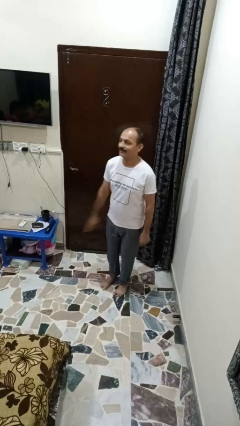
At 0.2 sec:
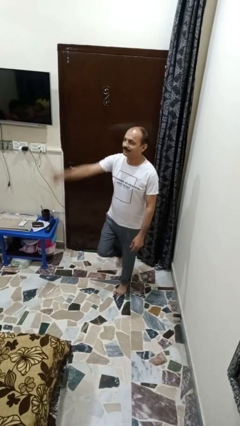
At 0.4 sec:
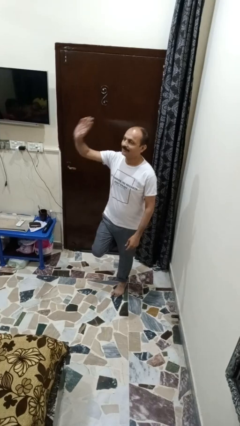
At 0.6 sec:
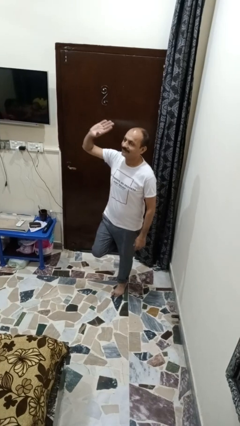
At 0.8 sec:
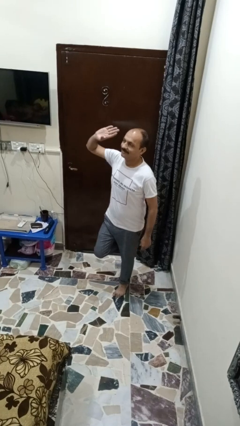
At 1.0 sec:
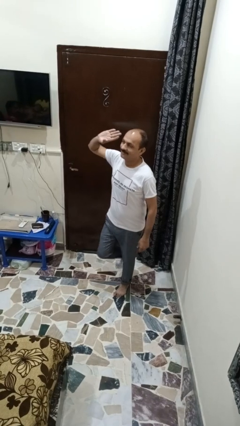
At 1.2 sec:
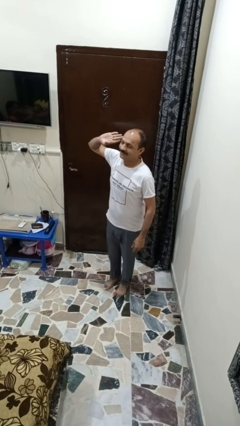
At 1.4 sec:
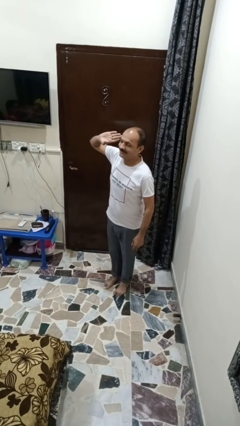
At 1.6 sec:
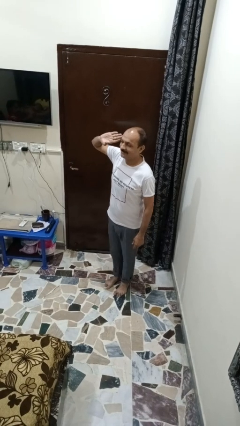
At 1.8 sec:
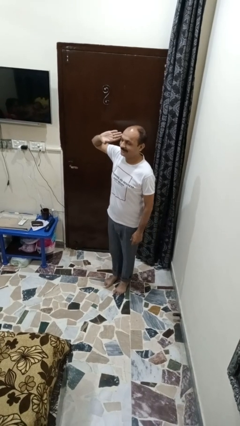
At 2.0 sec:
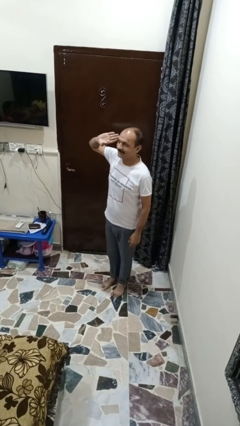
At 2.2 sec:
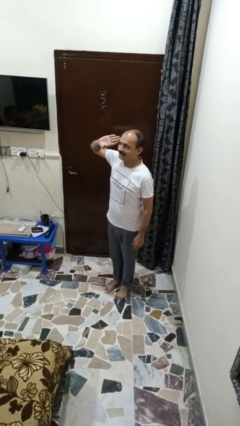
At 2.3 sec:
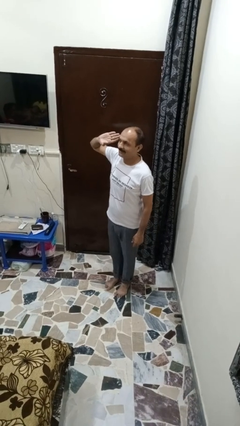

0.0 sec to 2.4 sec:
person salutes

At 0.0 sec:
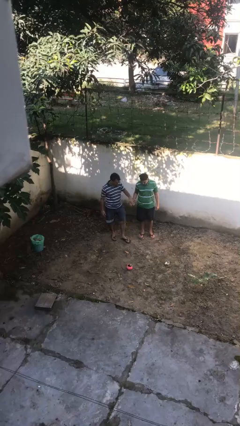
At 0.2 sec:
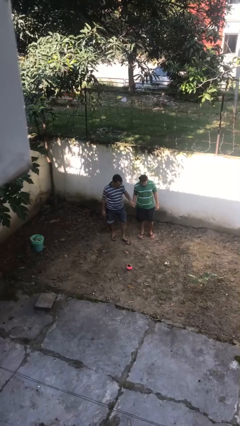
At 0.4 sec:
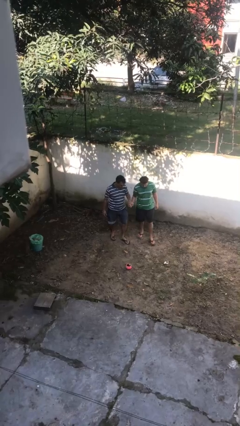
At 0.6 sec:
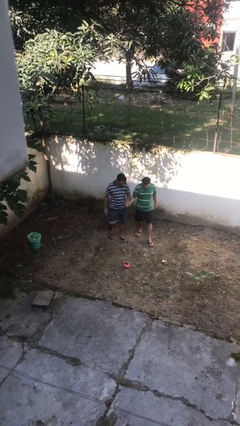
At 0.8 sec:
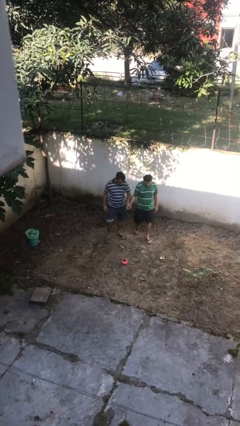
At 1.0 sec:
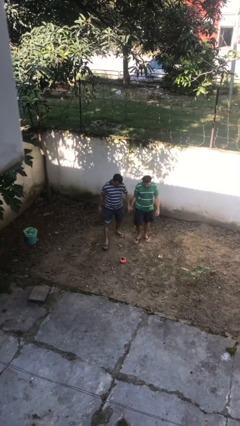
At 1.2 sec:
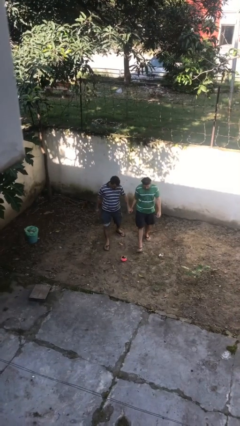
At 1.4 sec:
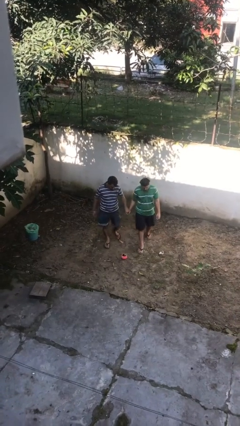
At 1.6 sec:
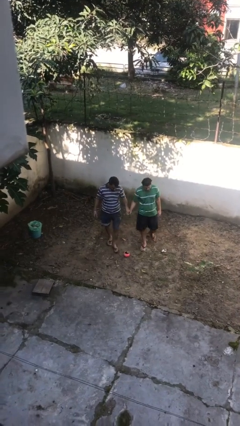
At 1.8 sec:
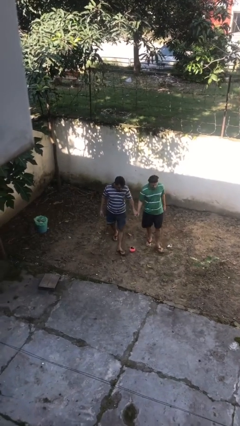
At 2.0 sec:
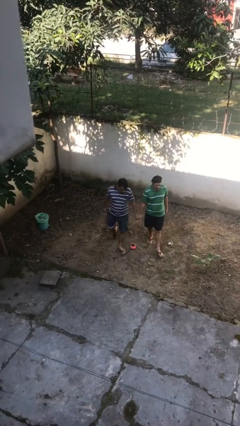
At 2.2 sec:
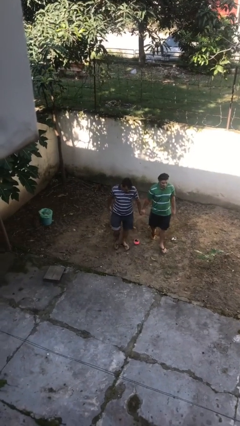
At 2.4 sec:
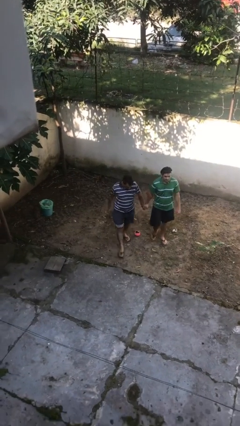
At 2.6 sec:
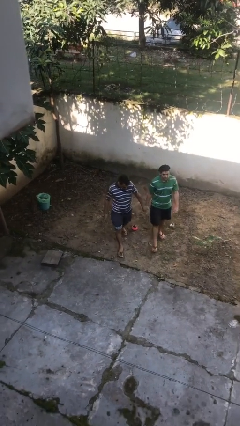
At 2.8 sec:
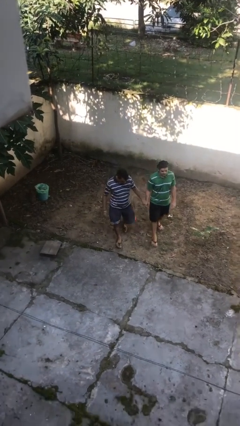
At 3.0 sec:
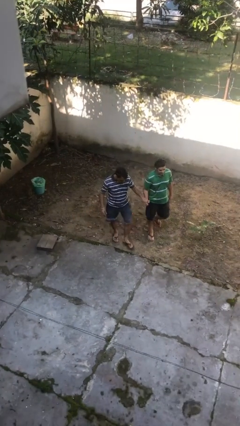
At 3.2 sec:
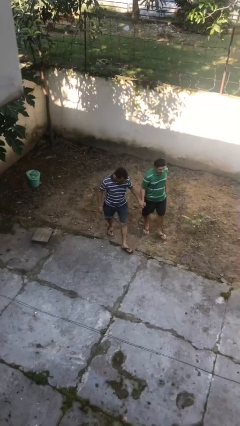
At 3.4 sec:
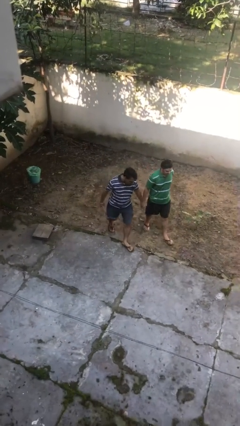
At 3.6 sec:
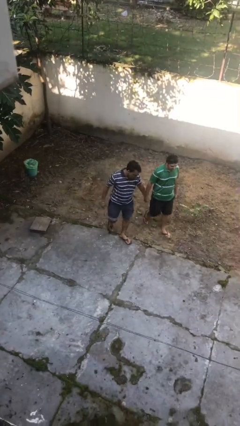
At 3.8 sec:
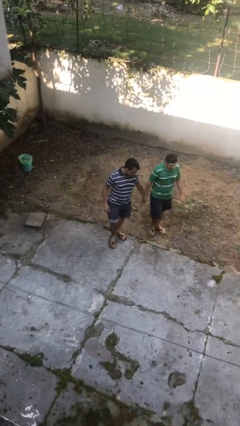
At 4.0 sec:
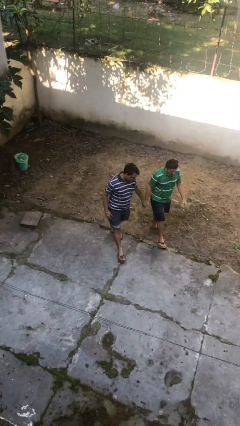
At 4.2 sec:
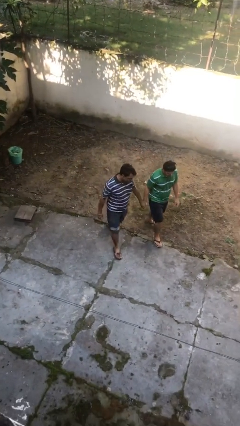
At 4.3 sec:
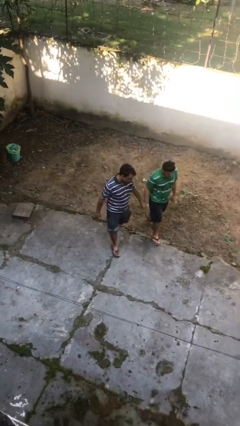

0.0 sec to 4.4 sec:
person holds hand

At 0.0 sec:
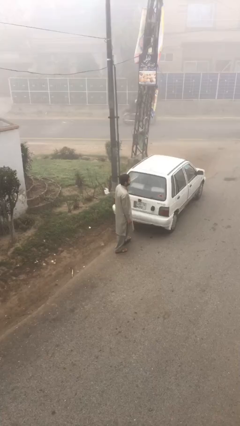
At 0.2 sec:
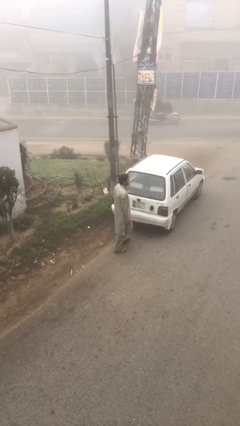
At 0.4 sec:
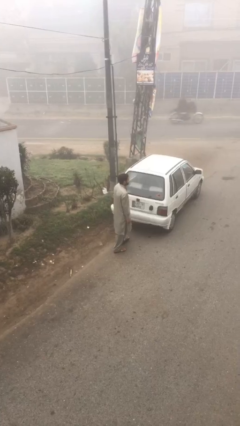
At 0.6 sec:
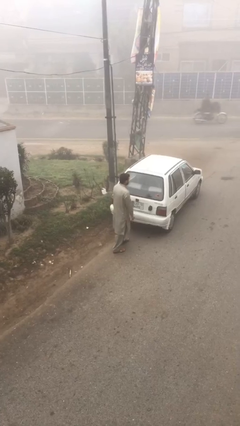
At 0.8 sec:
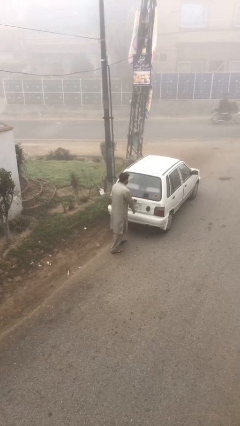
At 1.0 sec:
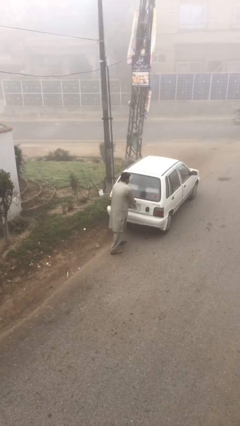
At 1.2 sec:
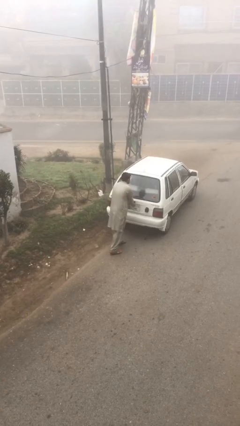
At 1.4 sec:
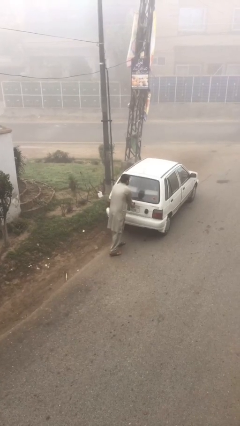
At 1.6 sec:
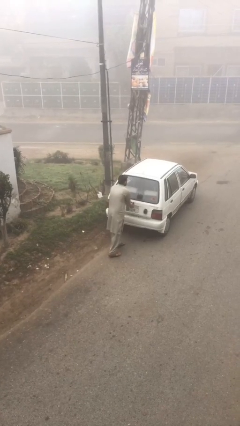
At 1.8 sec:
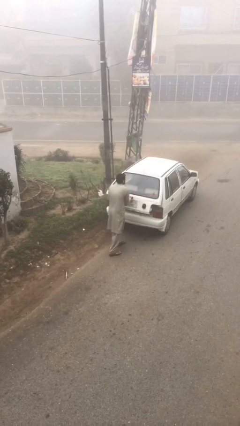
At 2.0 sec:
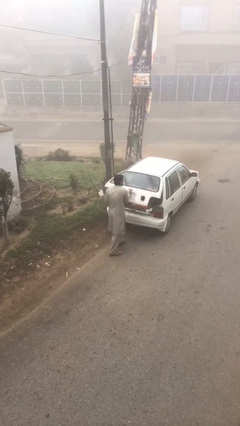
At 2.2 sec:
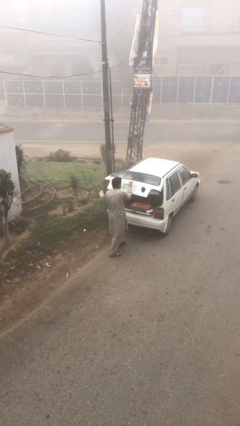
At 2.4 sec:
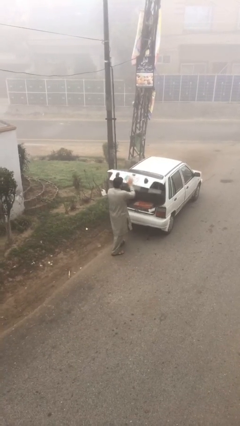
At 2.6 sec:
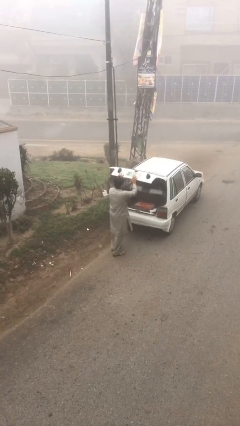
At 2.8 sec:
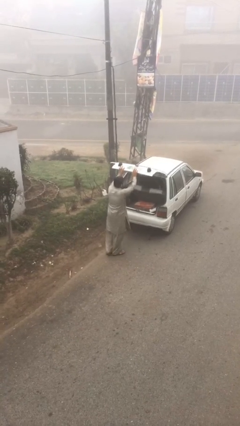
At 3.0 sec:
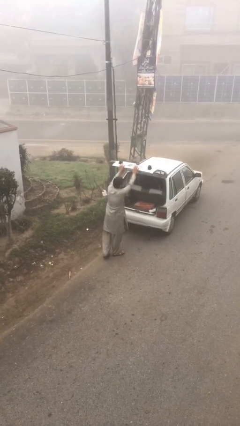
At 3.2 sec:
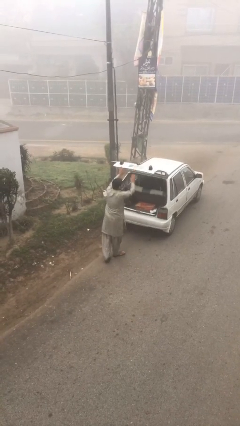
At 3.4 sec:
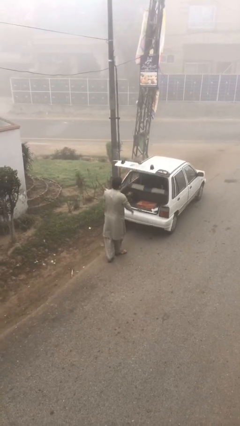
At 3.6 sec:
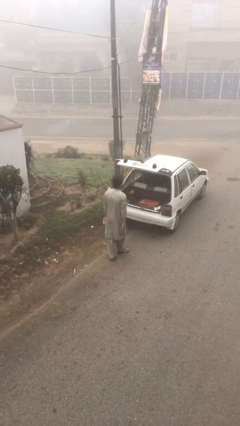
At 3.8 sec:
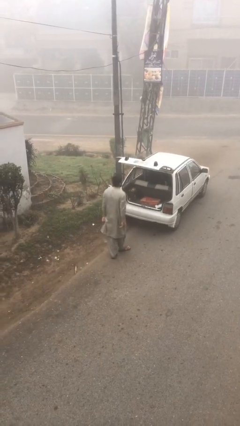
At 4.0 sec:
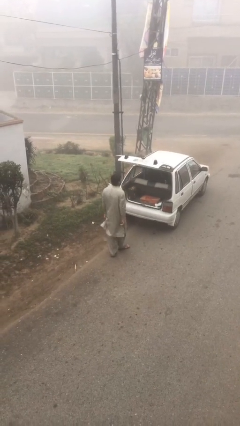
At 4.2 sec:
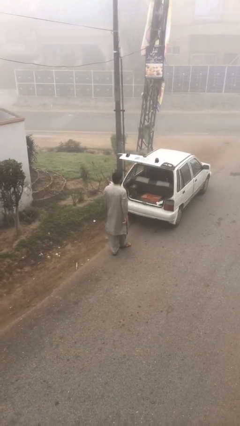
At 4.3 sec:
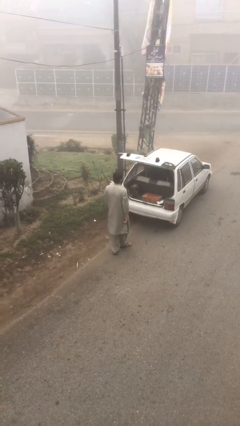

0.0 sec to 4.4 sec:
person opens car trunk

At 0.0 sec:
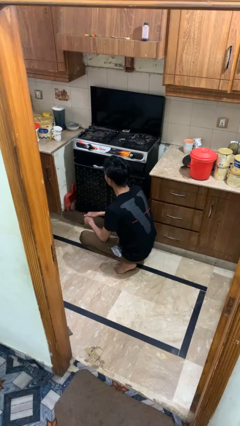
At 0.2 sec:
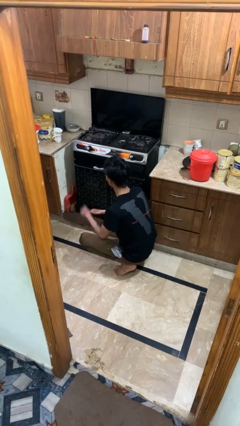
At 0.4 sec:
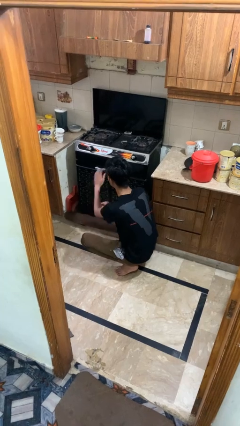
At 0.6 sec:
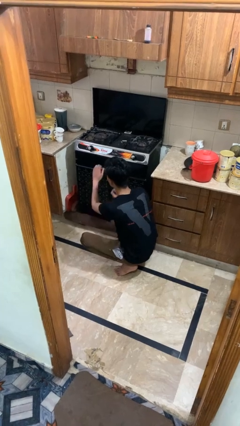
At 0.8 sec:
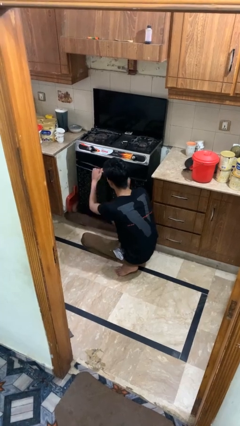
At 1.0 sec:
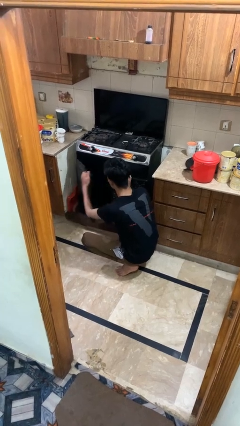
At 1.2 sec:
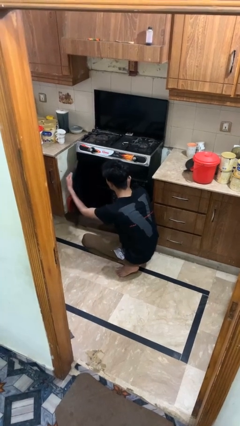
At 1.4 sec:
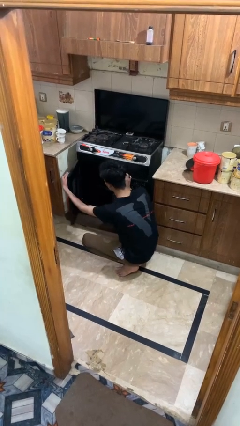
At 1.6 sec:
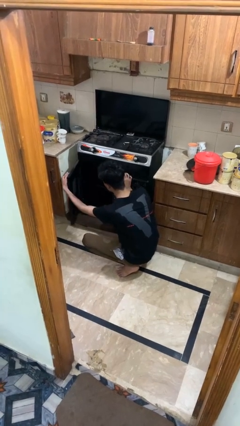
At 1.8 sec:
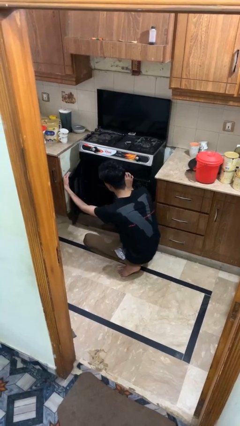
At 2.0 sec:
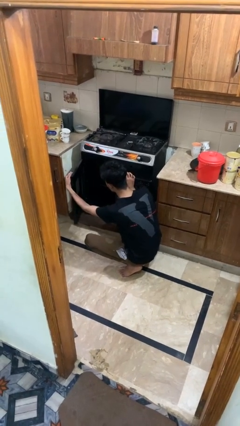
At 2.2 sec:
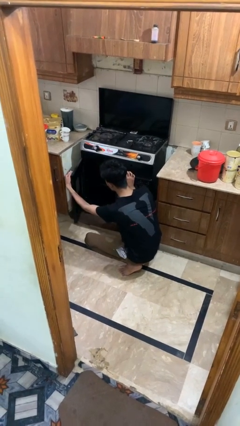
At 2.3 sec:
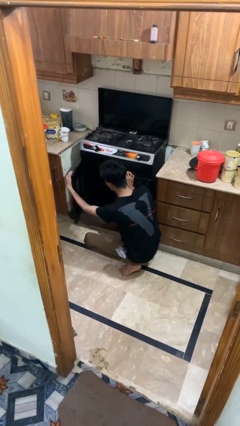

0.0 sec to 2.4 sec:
person opens oven door

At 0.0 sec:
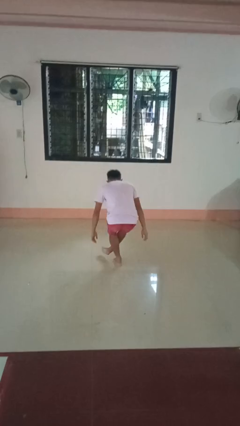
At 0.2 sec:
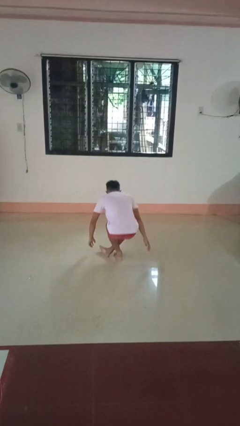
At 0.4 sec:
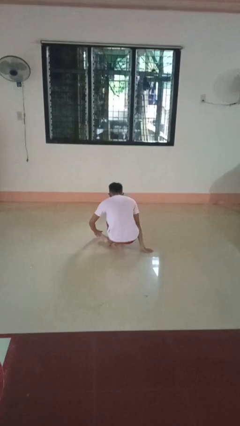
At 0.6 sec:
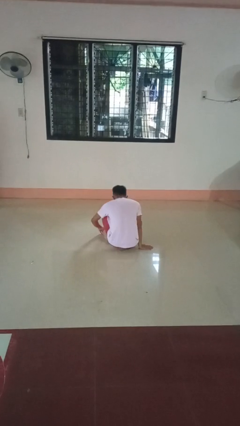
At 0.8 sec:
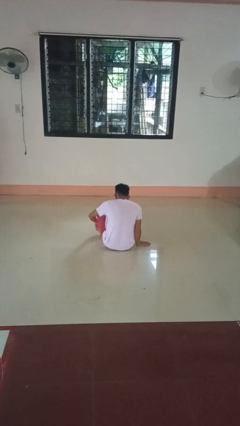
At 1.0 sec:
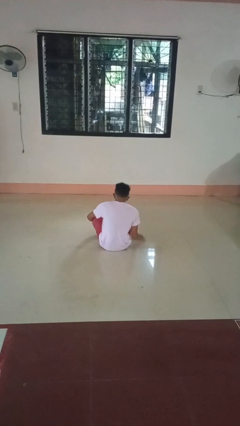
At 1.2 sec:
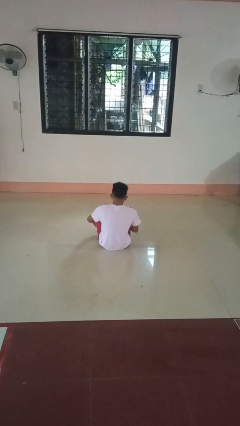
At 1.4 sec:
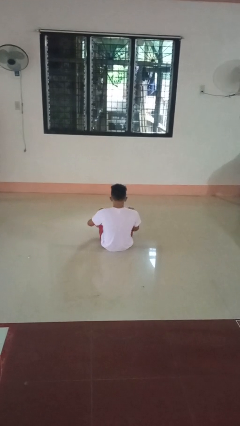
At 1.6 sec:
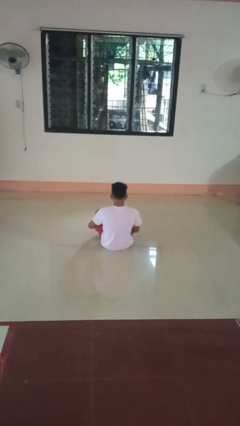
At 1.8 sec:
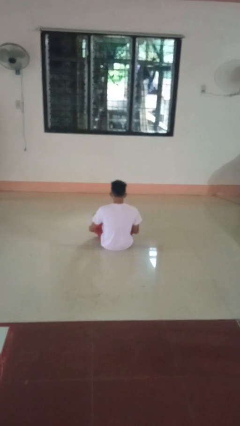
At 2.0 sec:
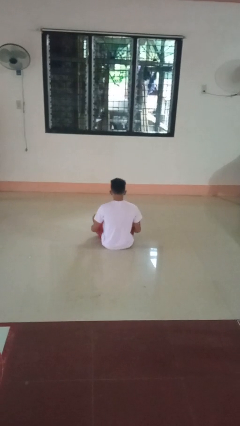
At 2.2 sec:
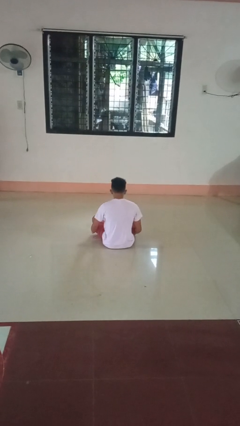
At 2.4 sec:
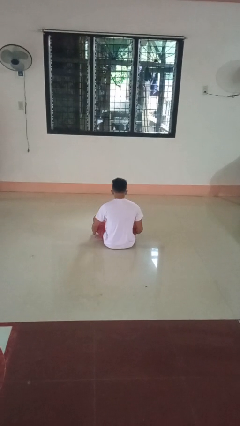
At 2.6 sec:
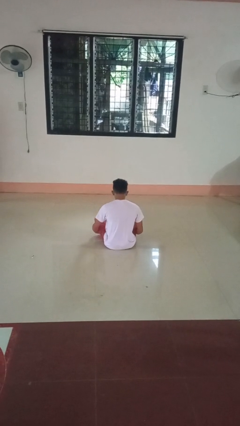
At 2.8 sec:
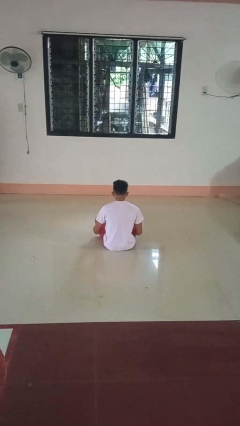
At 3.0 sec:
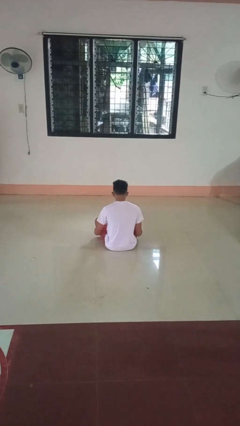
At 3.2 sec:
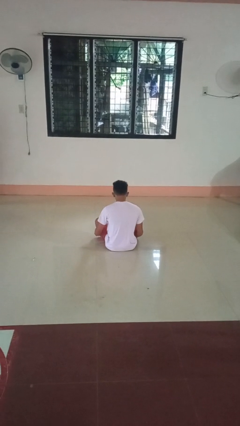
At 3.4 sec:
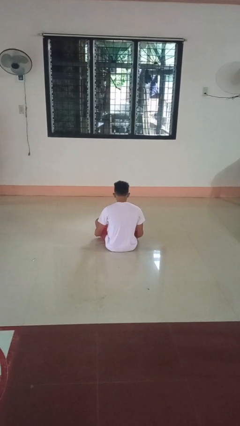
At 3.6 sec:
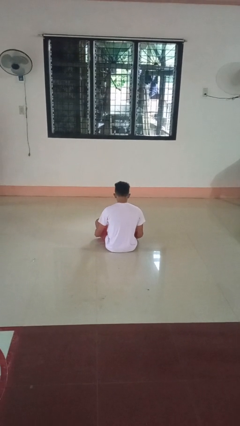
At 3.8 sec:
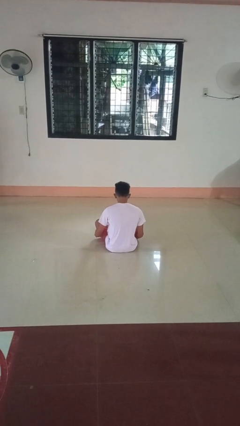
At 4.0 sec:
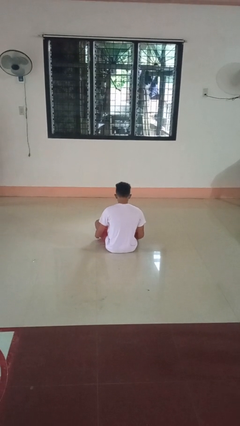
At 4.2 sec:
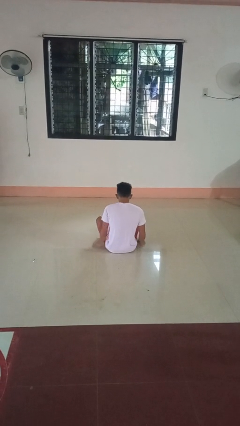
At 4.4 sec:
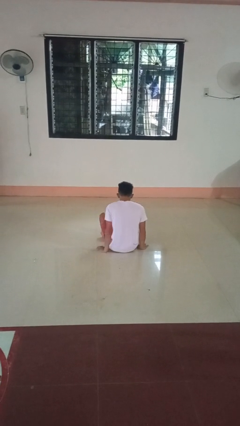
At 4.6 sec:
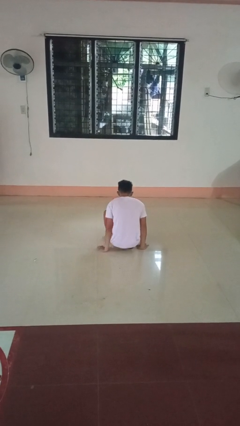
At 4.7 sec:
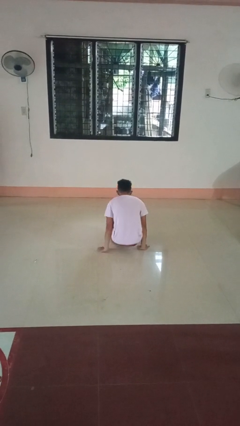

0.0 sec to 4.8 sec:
person sits crisscross
